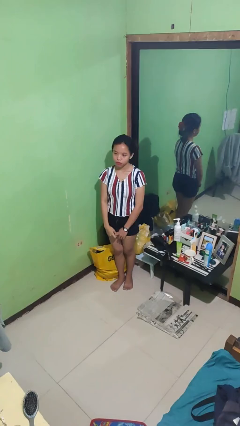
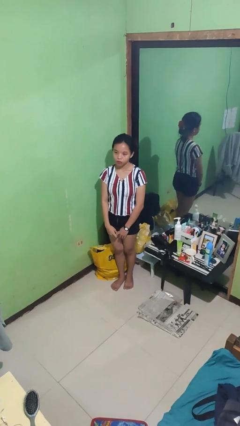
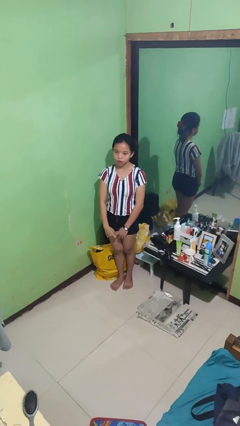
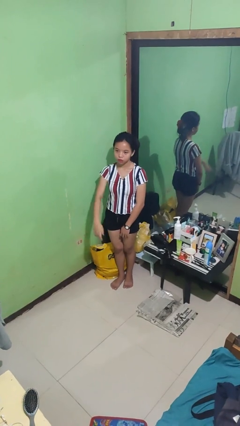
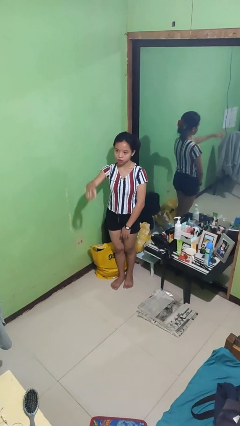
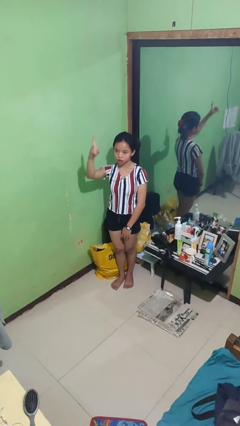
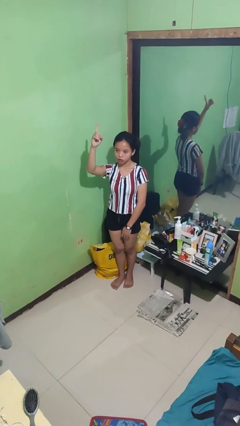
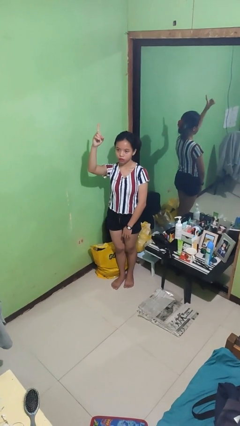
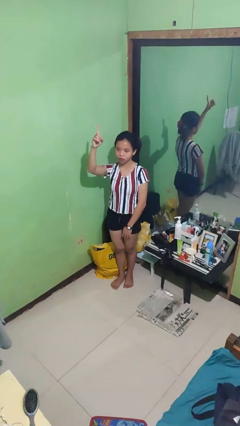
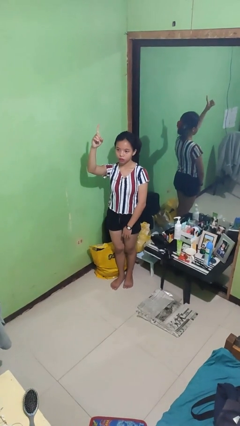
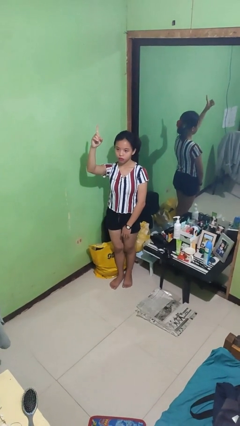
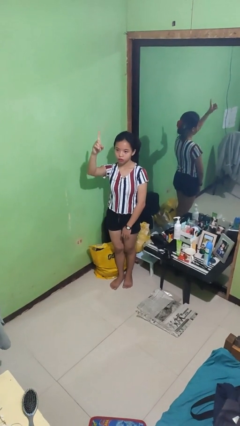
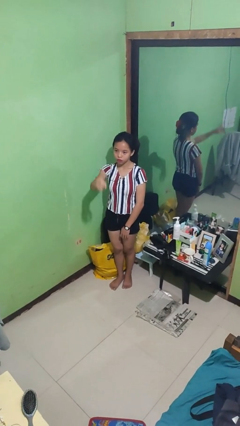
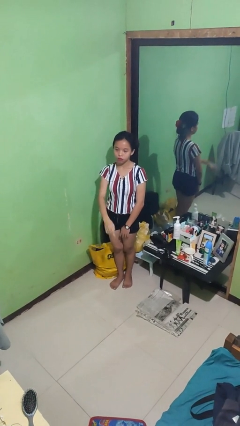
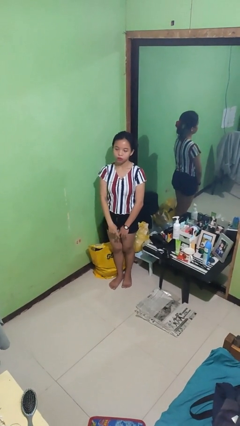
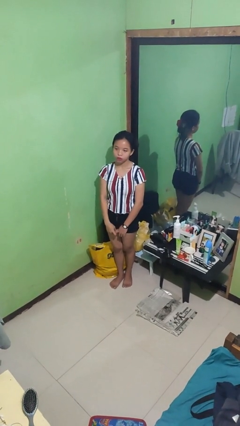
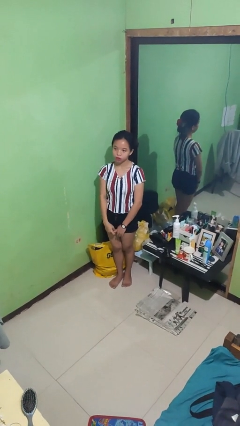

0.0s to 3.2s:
person gestures number one

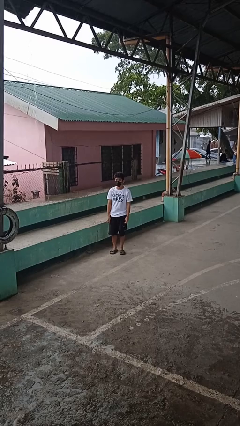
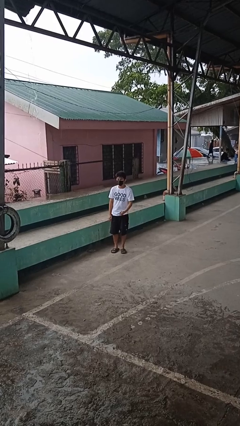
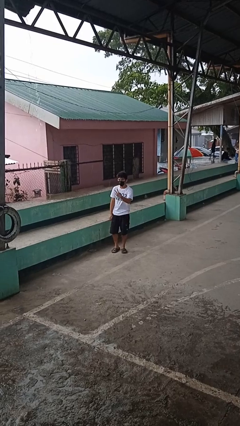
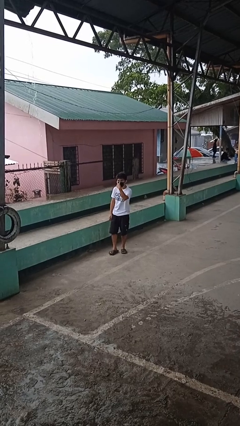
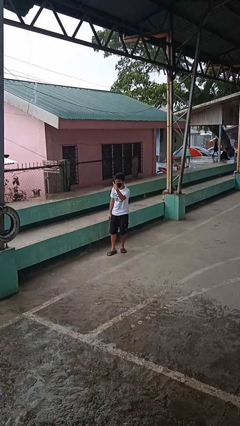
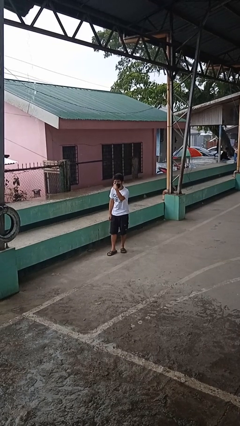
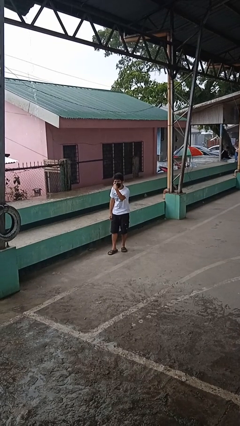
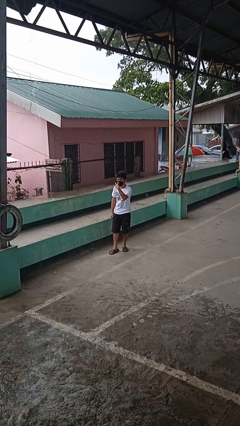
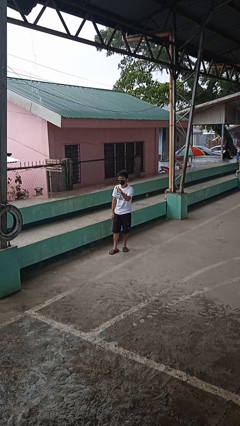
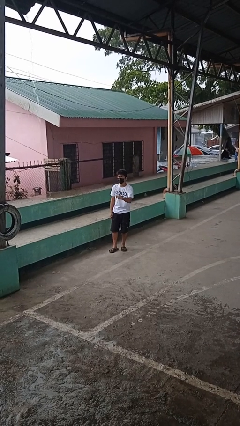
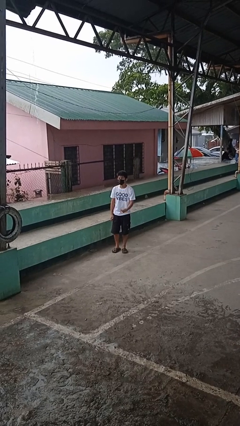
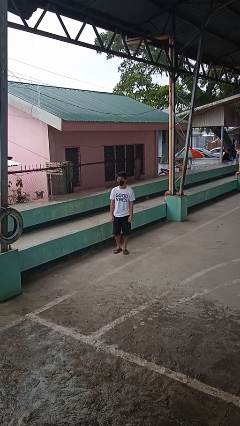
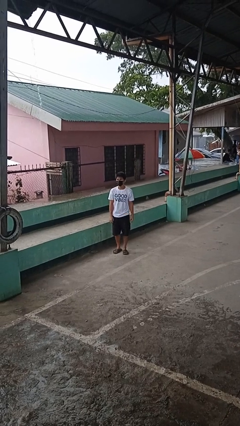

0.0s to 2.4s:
person gestures watch closely

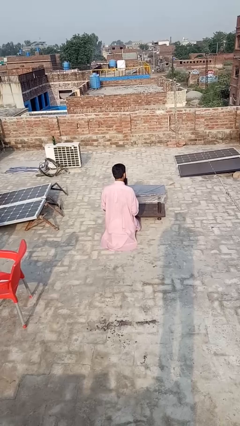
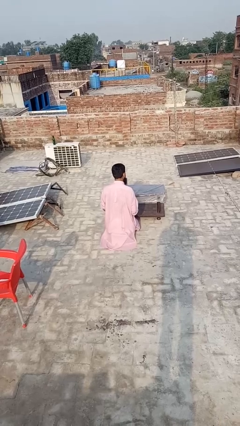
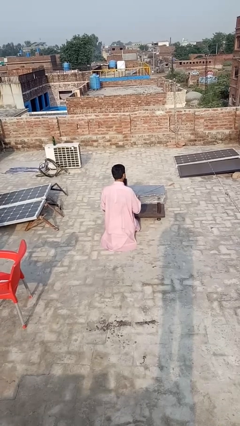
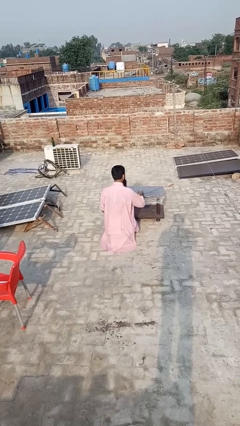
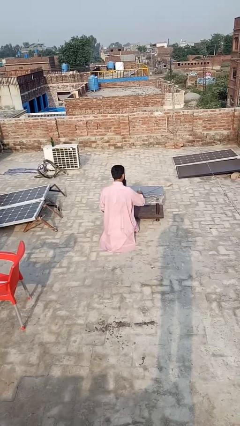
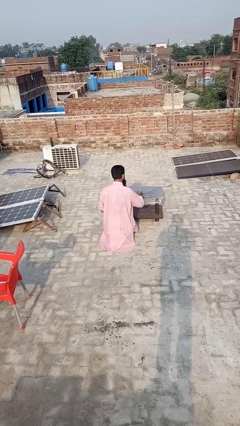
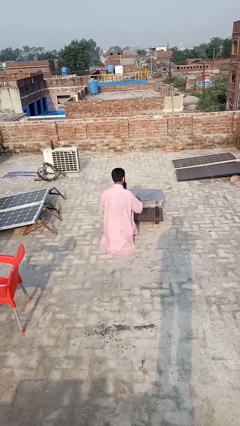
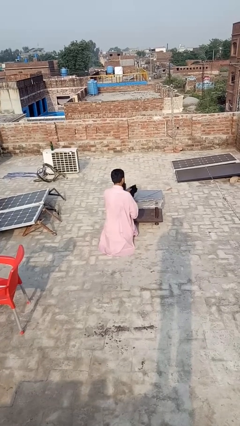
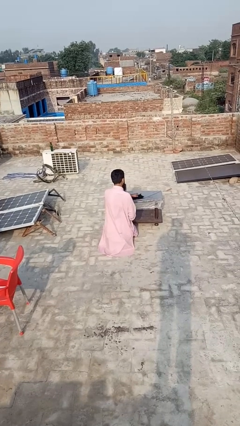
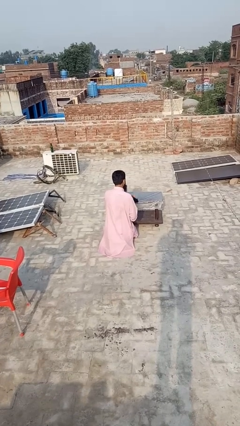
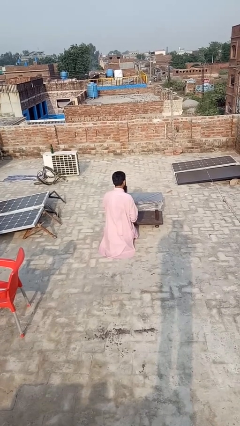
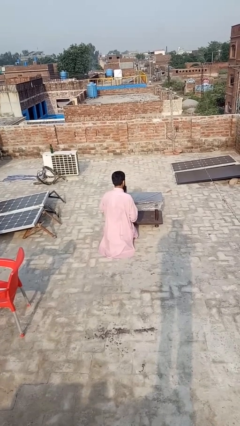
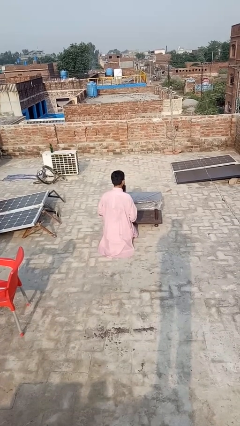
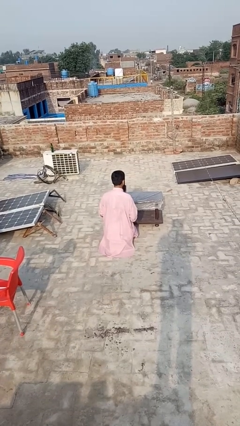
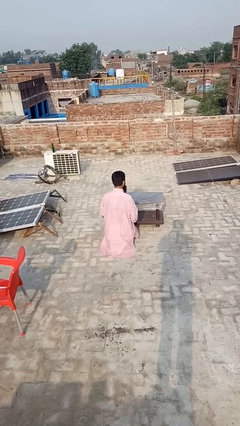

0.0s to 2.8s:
person sprays from bottle

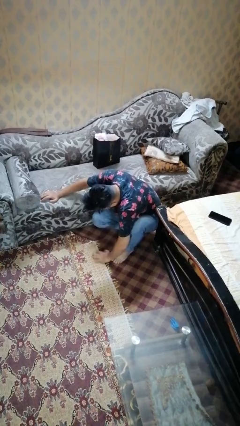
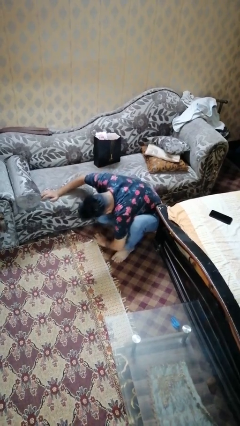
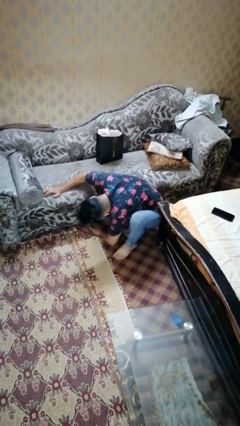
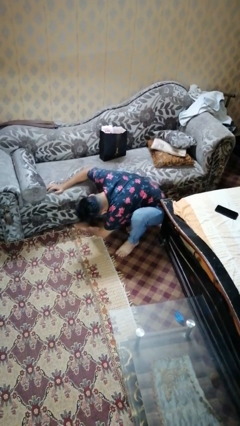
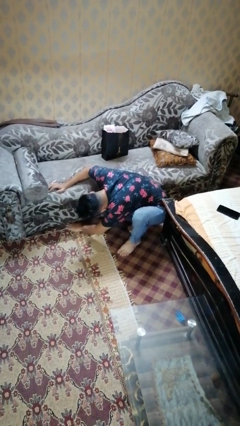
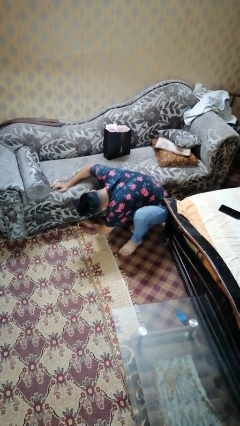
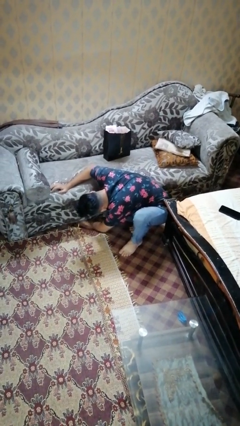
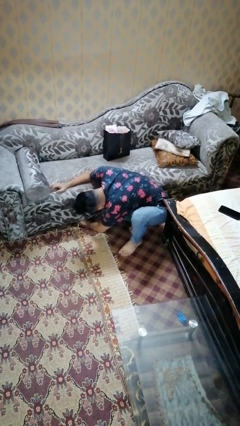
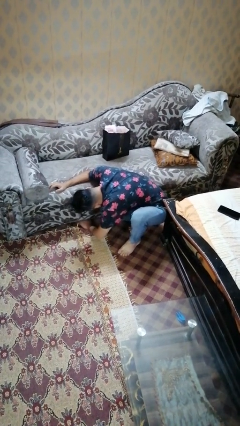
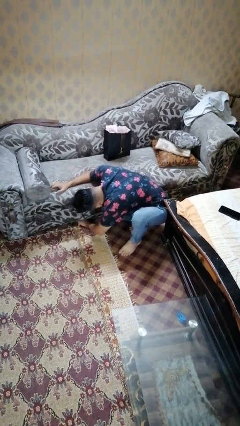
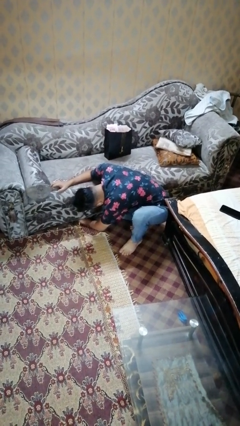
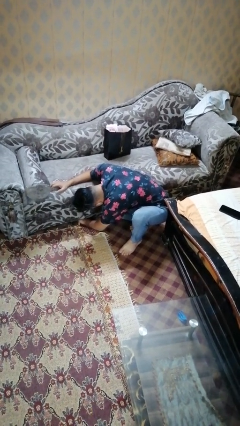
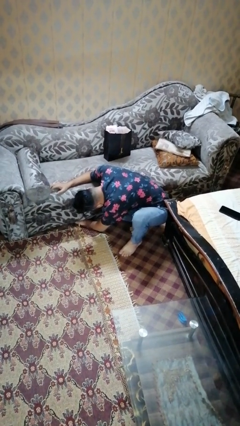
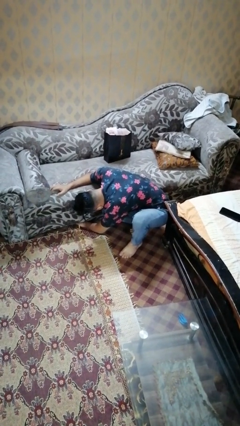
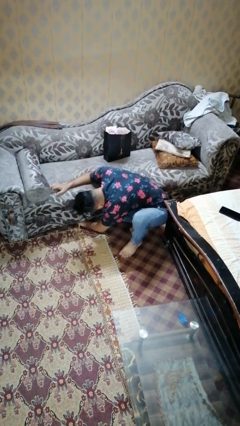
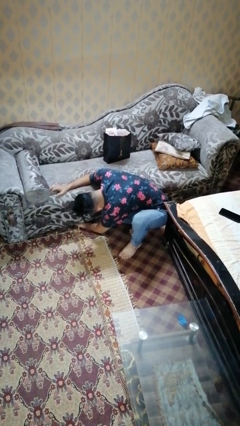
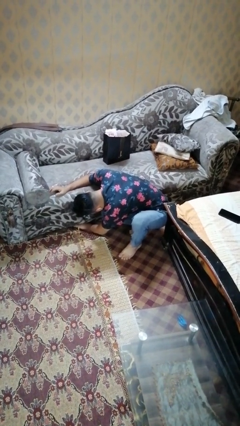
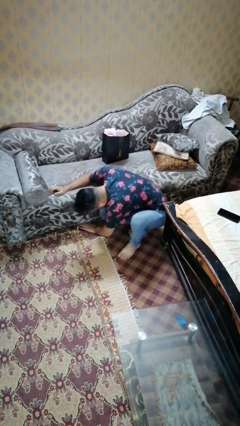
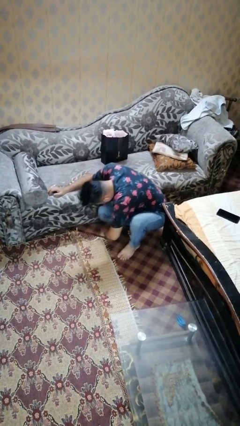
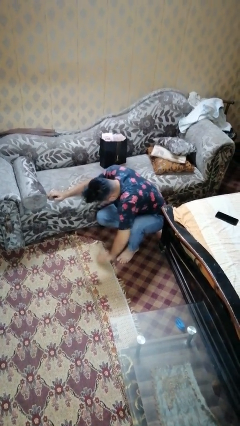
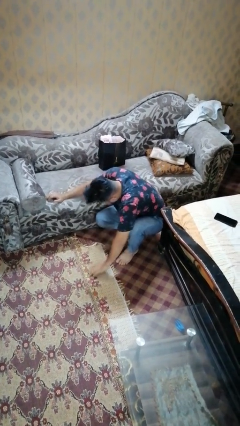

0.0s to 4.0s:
person searches under couch

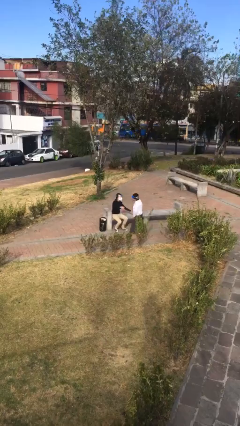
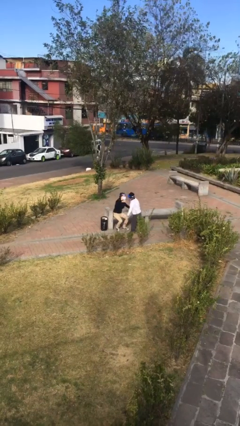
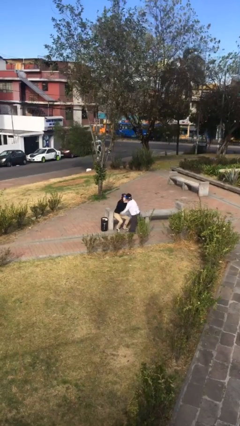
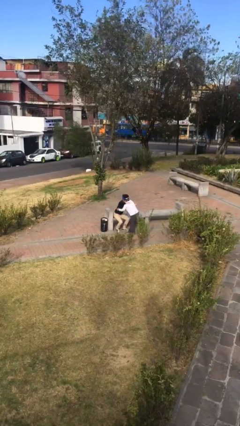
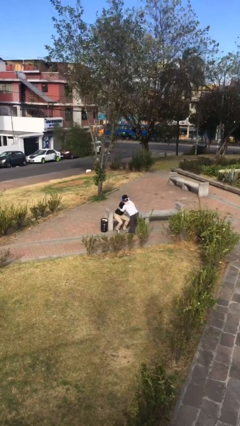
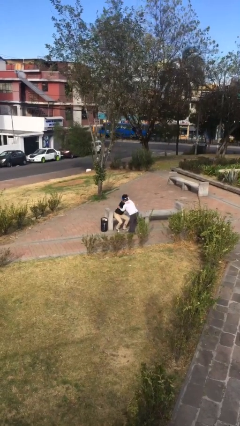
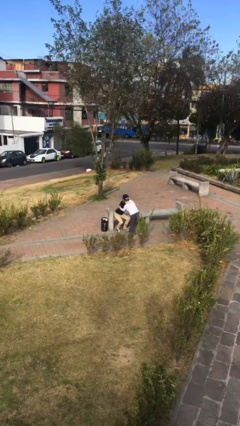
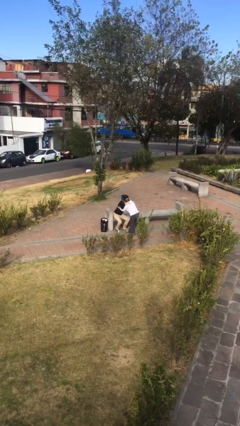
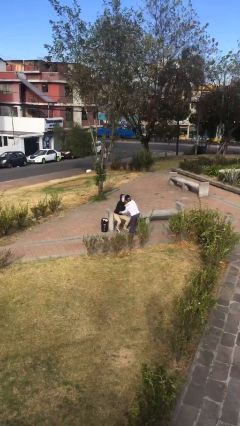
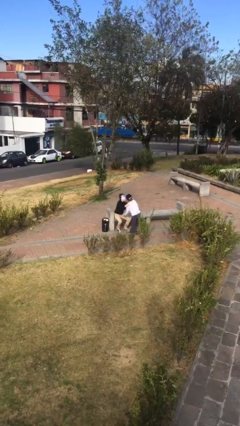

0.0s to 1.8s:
person embraces person

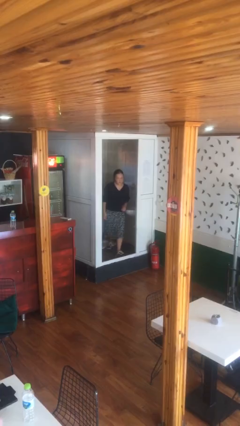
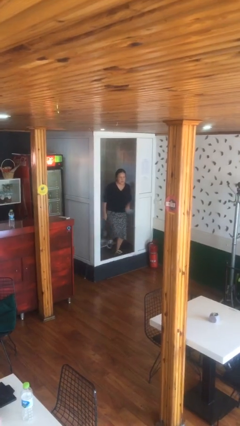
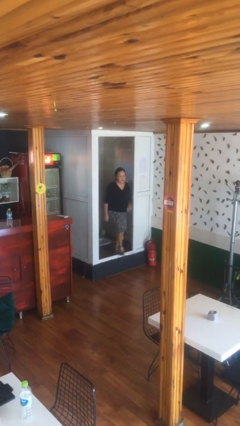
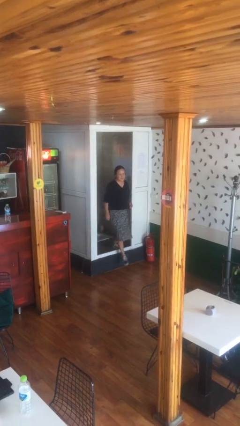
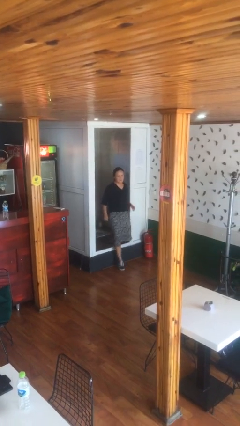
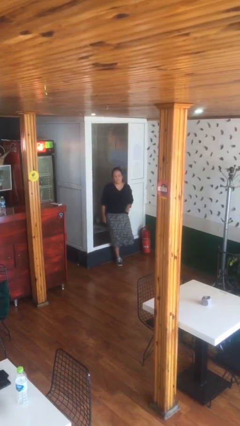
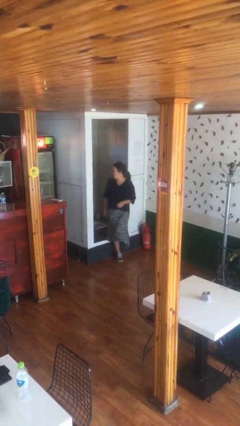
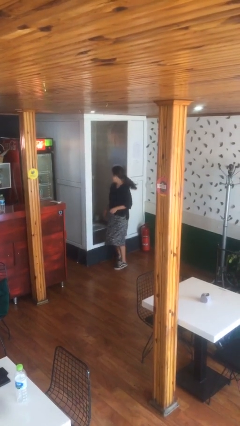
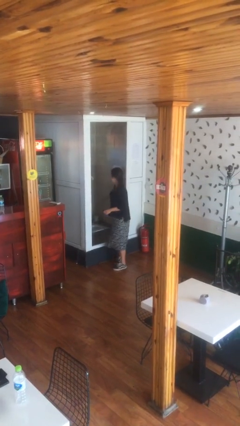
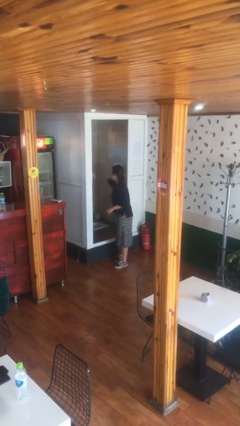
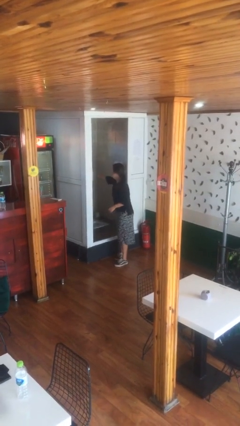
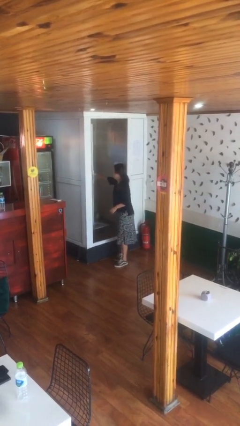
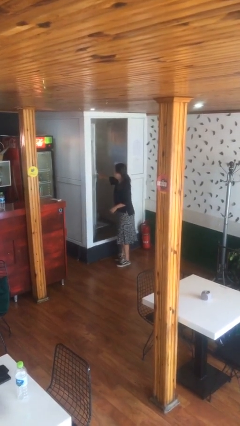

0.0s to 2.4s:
person enters scene through structure

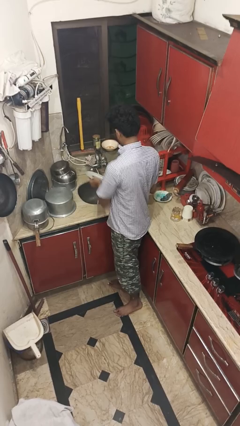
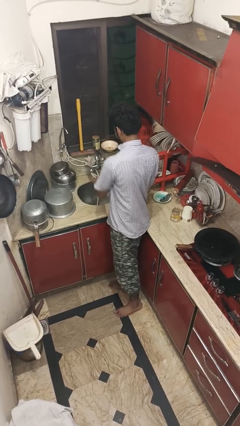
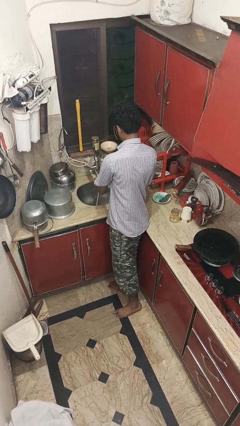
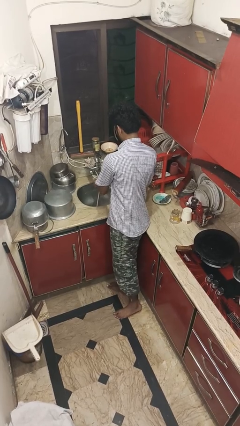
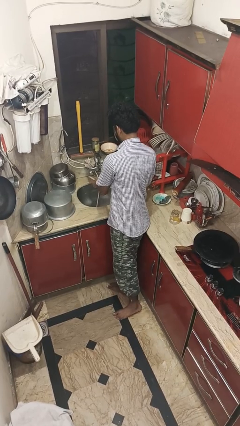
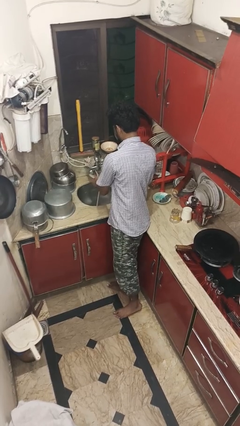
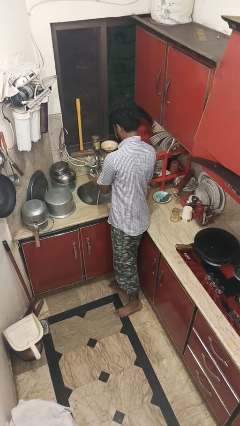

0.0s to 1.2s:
person washes dish
